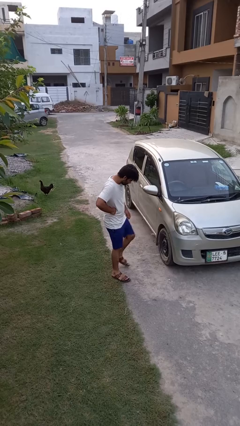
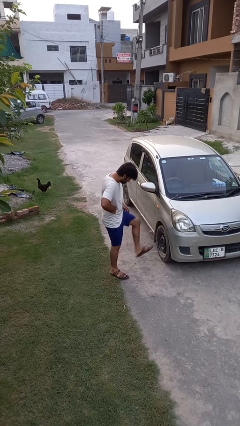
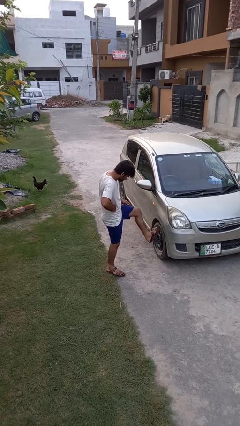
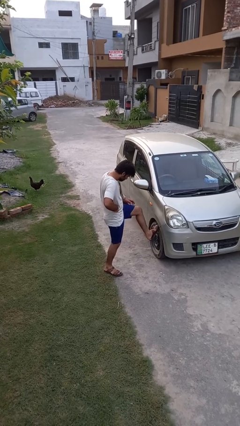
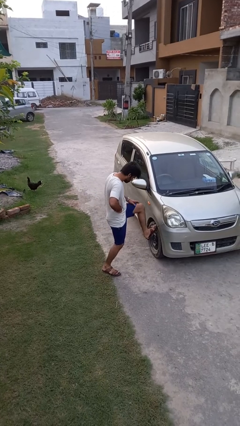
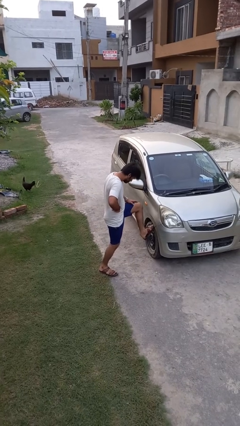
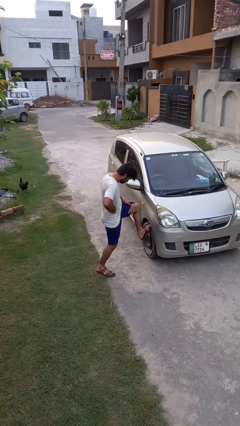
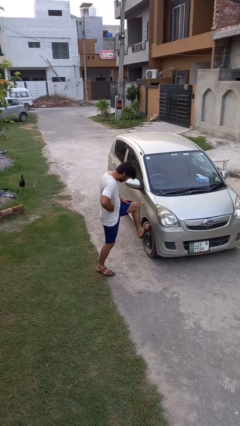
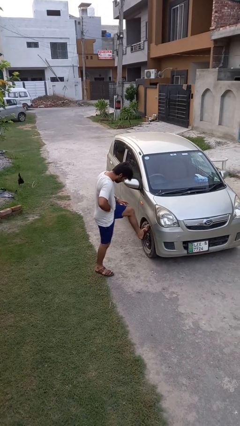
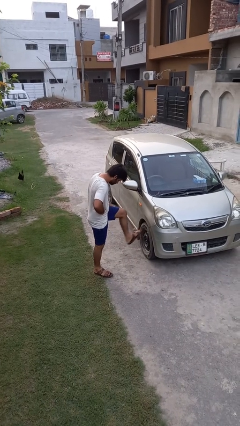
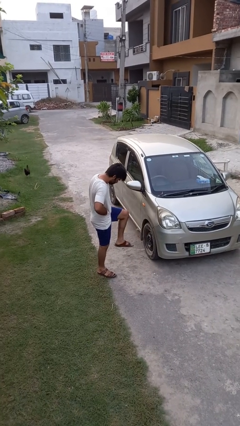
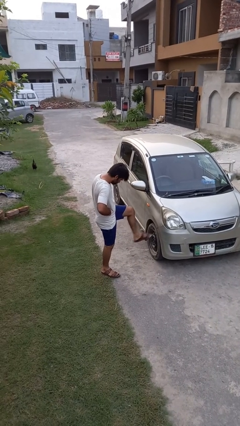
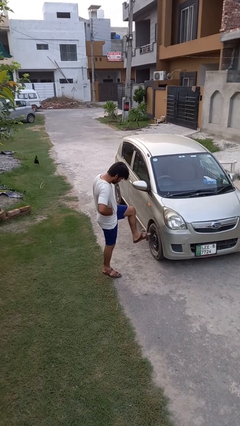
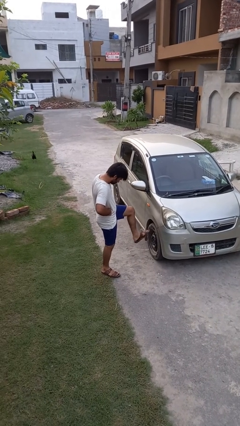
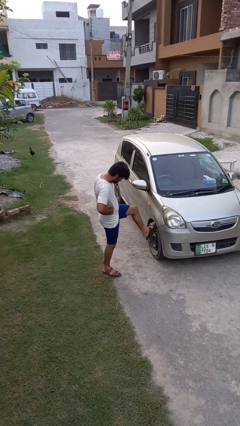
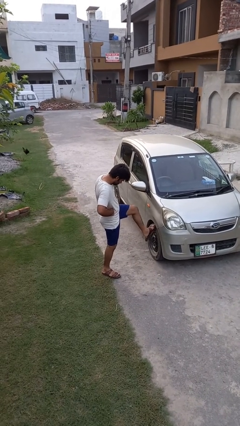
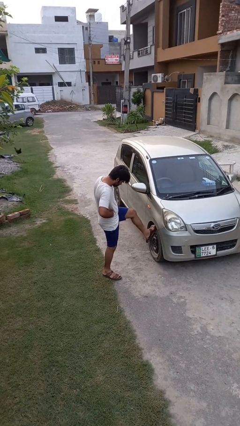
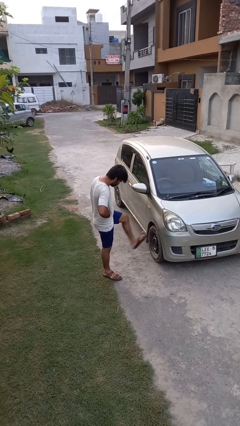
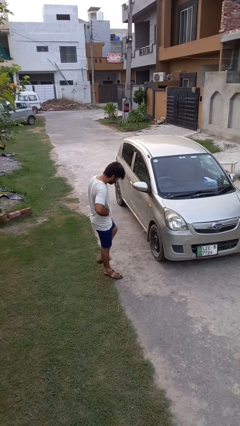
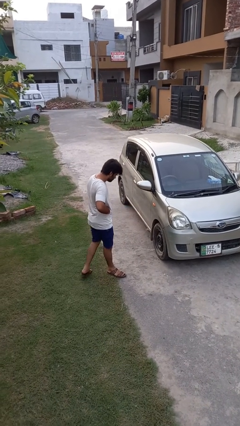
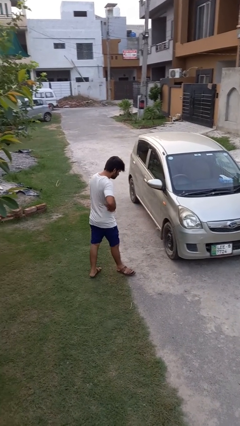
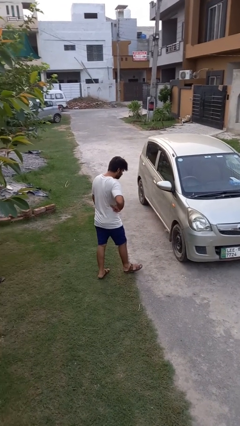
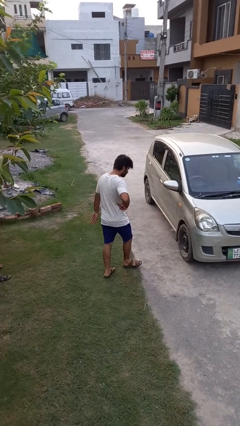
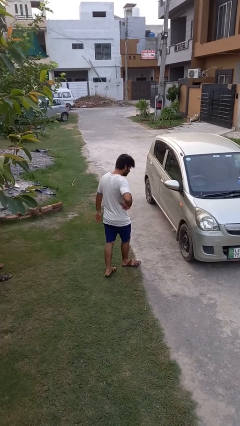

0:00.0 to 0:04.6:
person kicks car tires

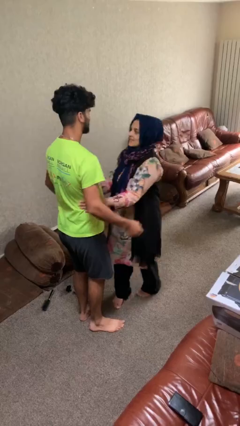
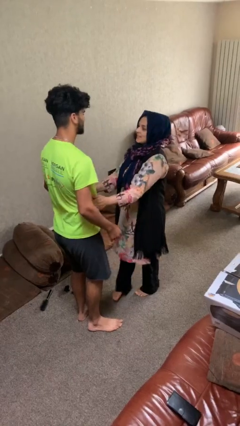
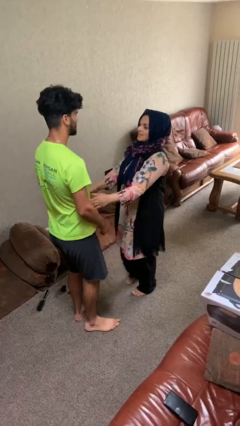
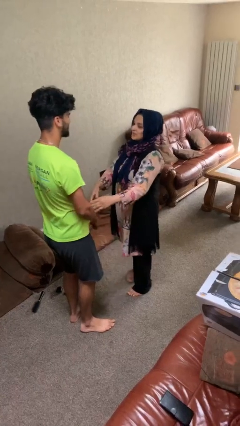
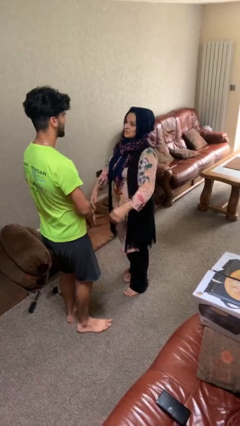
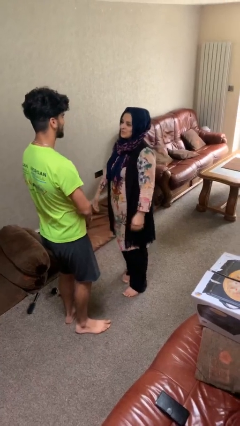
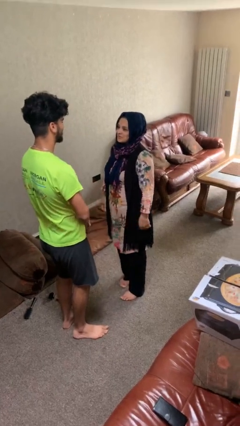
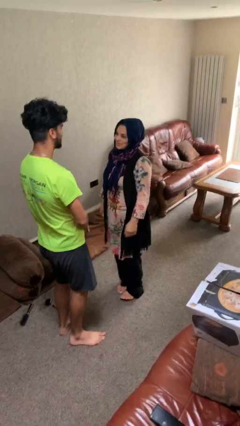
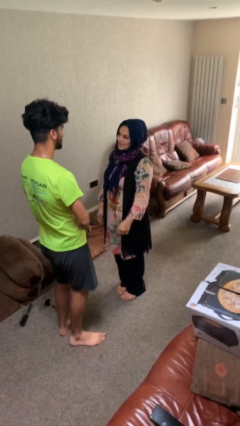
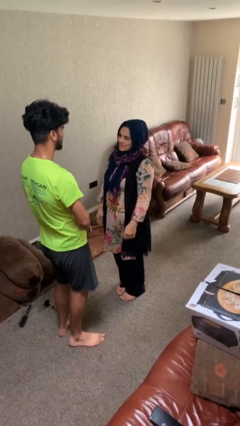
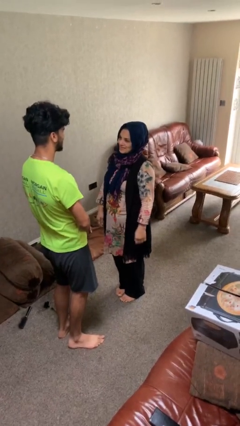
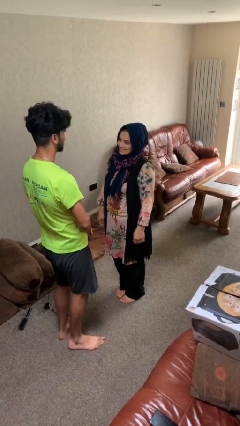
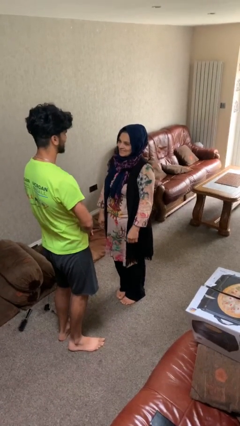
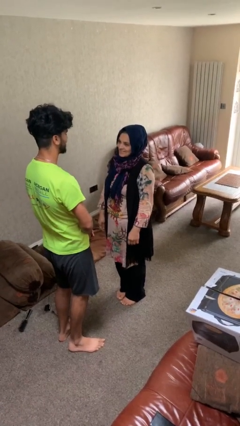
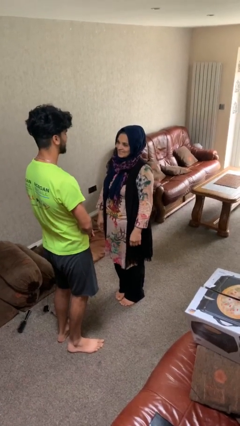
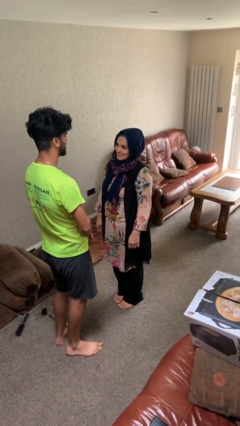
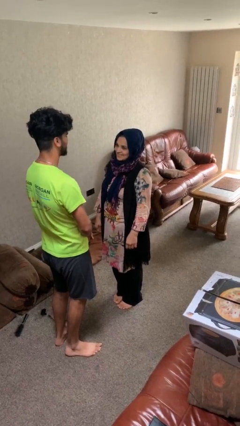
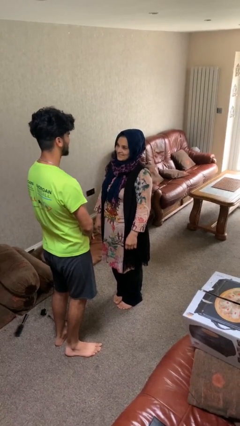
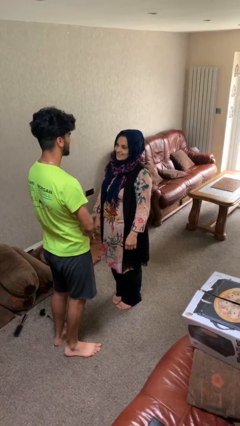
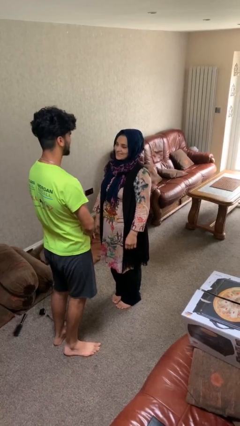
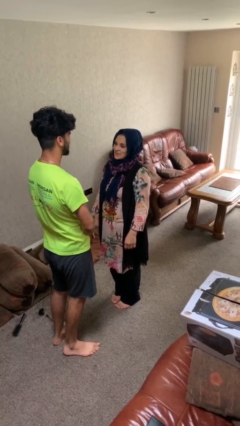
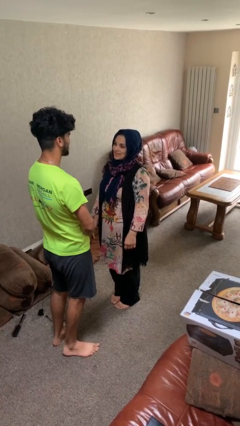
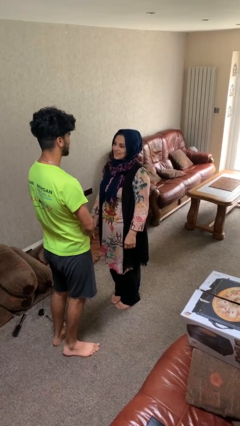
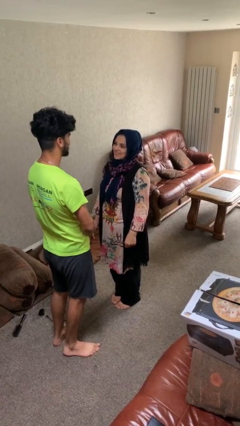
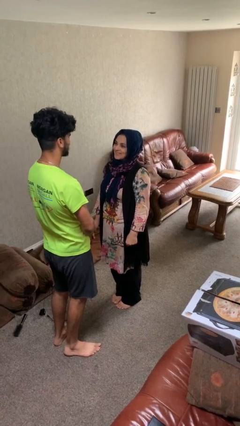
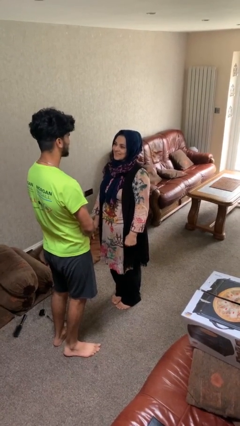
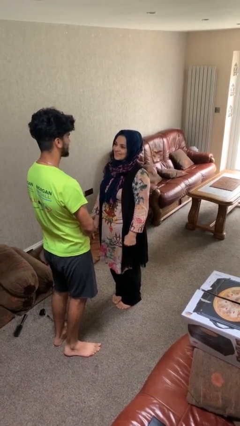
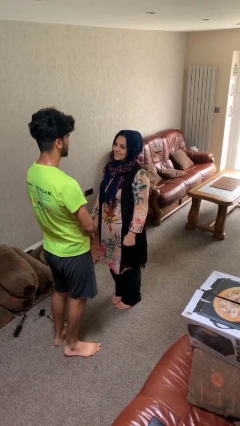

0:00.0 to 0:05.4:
person talks to person

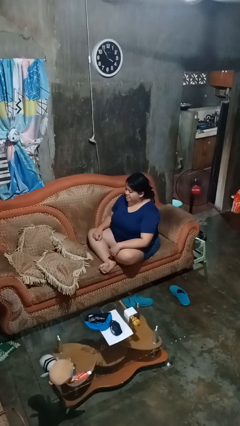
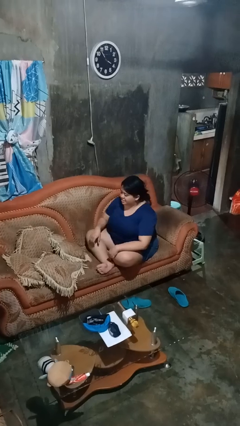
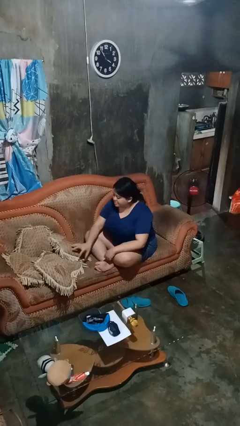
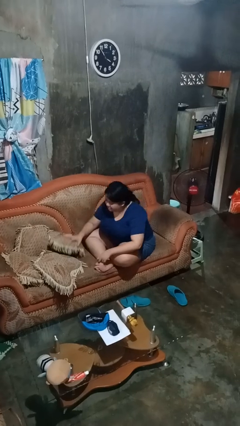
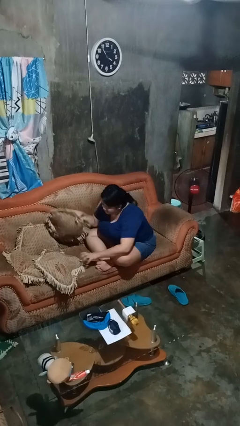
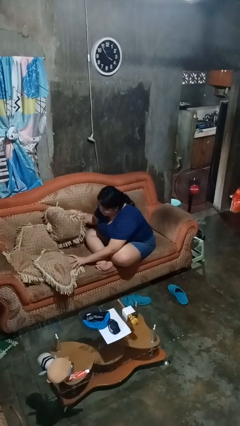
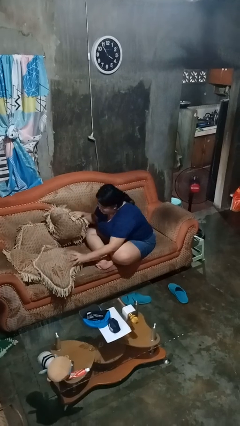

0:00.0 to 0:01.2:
person searches in couch

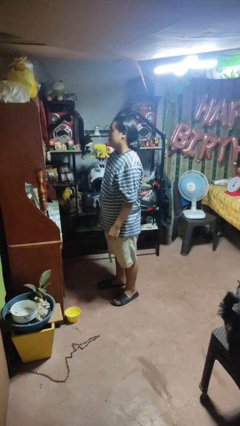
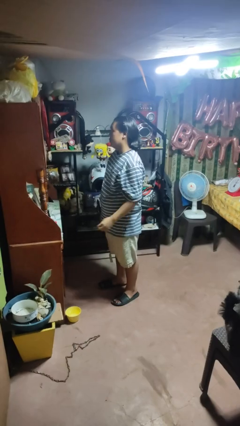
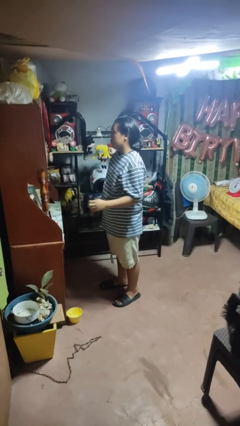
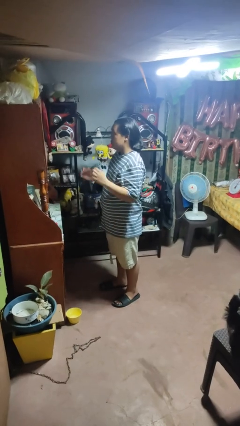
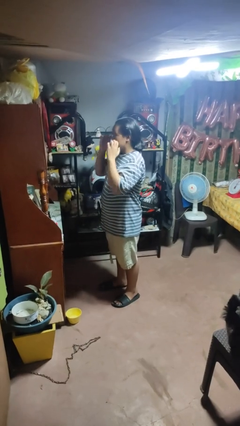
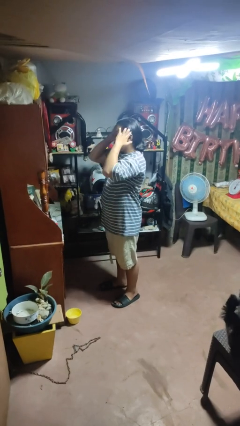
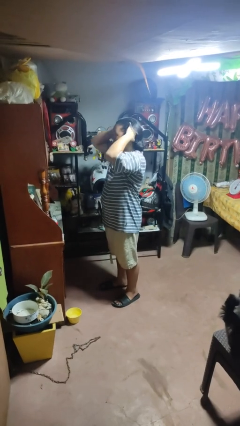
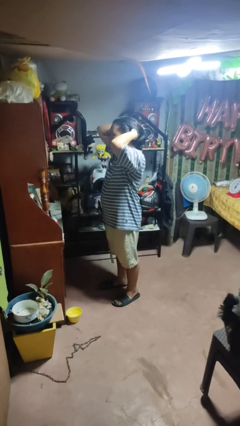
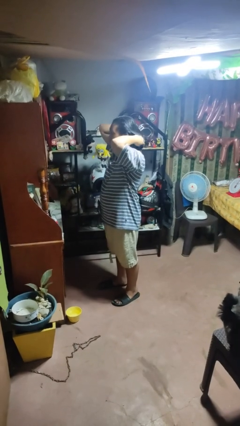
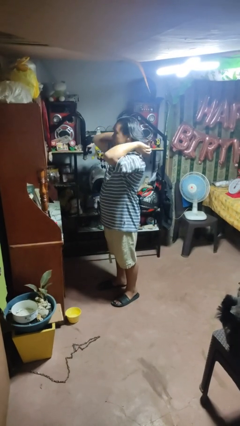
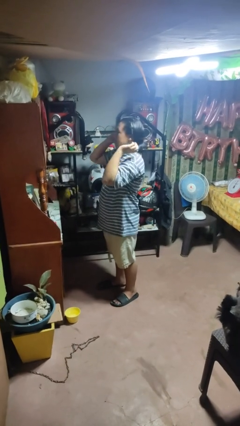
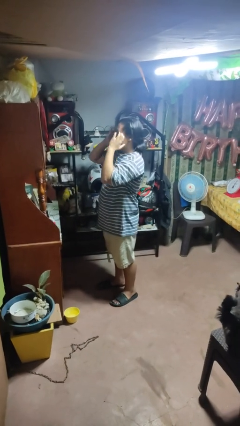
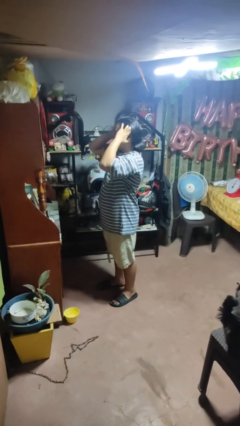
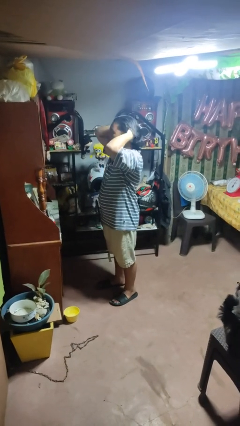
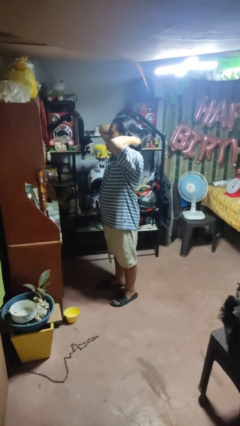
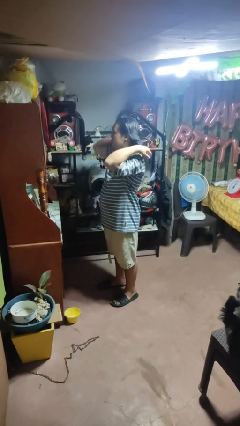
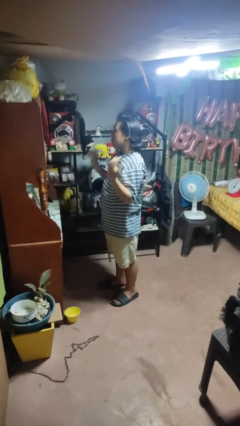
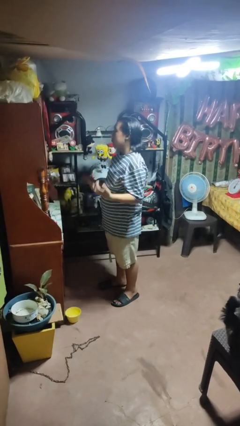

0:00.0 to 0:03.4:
person strokes hair

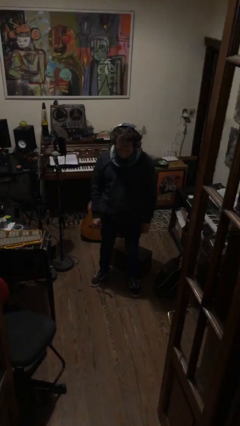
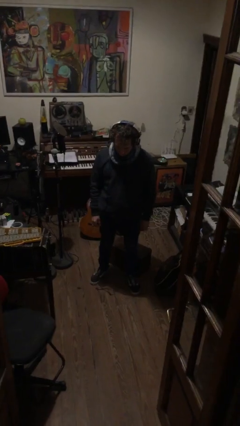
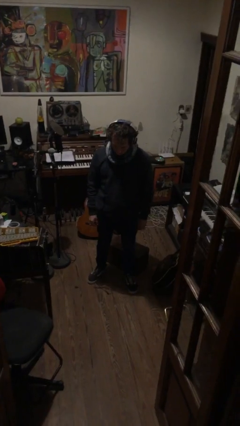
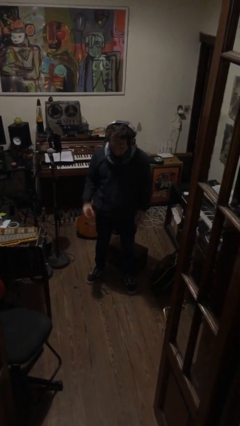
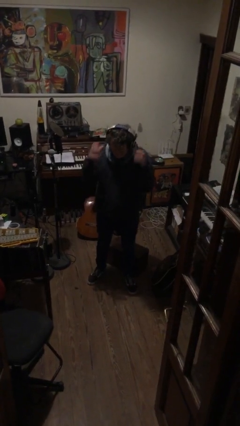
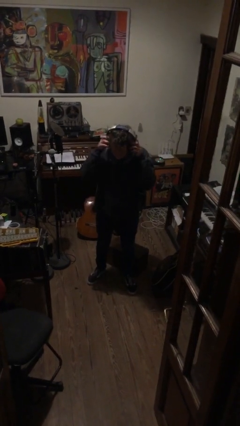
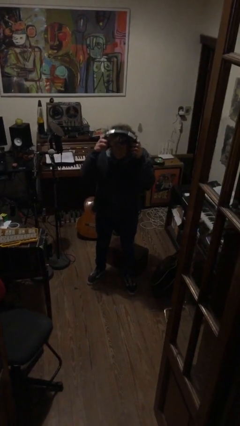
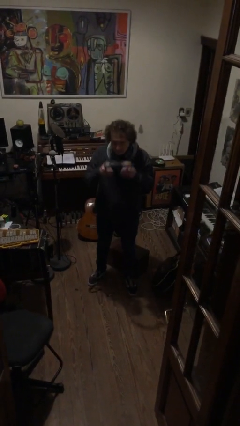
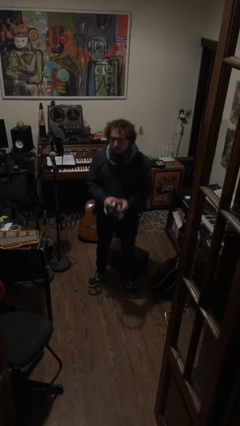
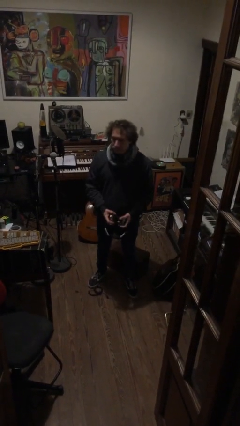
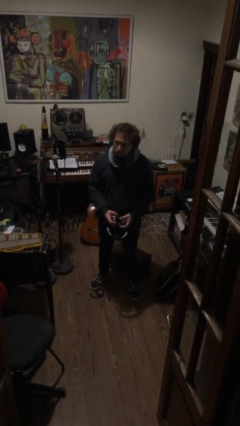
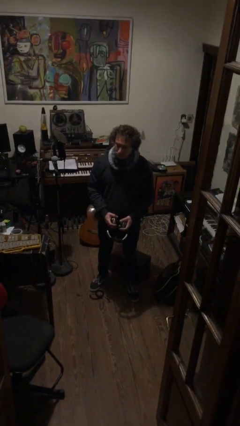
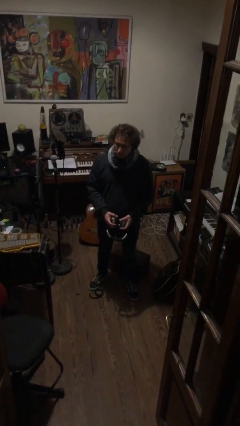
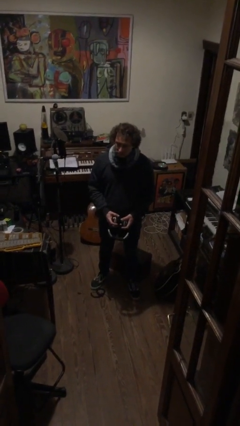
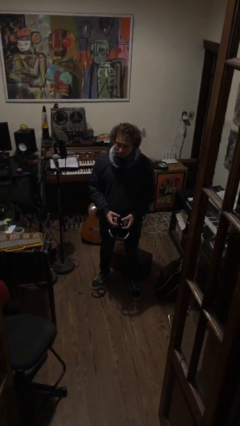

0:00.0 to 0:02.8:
person takes off headphones
